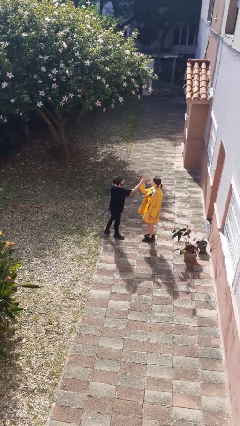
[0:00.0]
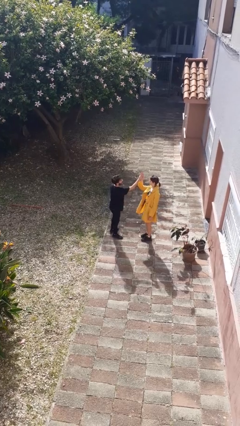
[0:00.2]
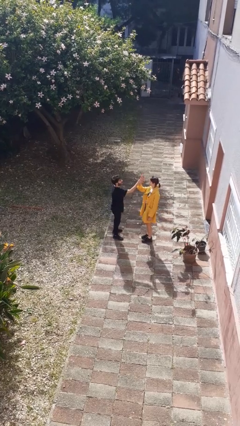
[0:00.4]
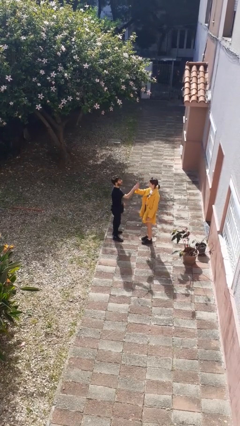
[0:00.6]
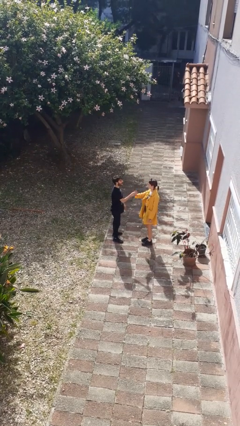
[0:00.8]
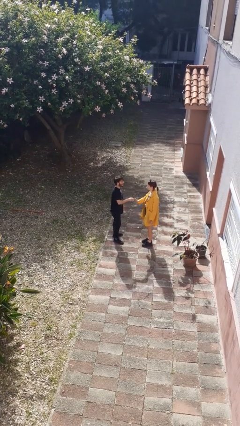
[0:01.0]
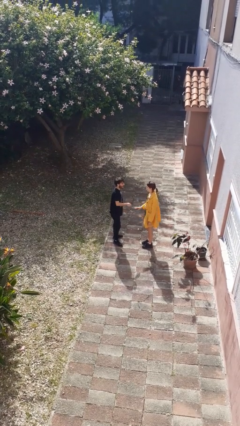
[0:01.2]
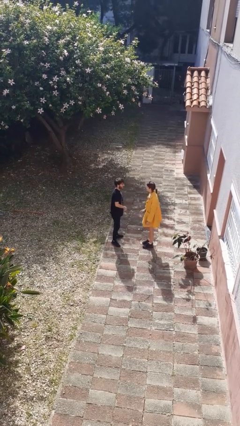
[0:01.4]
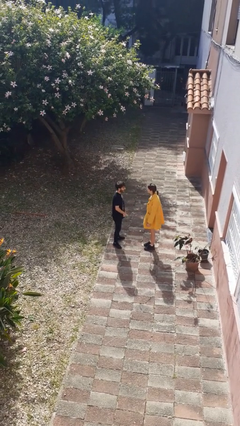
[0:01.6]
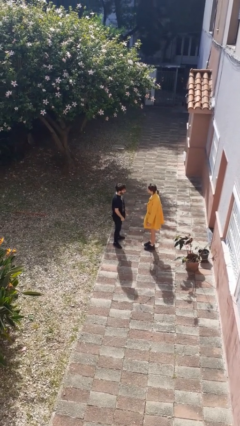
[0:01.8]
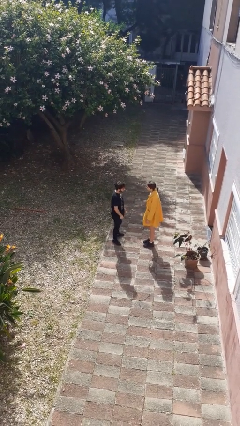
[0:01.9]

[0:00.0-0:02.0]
person highfives hand

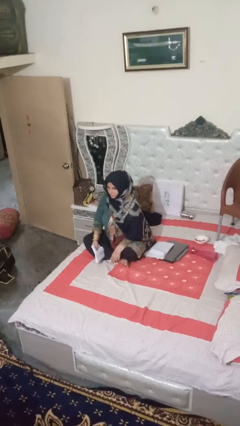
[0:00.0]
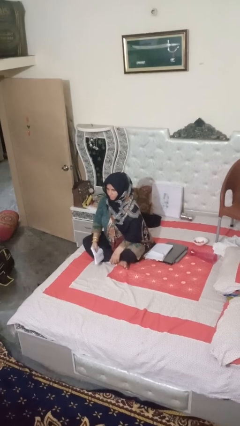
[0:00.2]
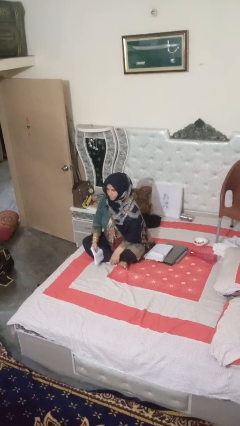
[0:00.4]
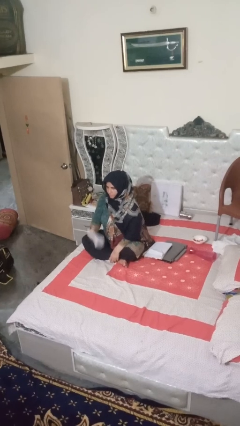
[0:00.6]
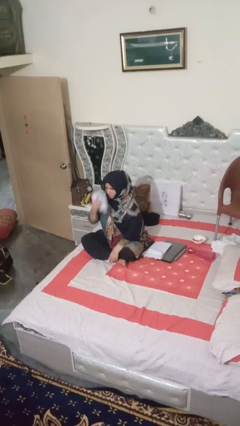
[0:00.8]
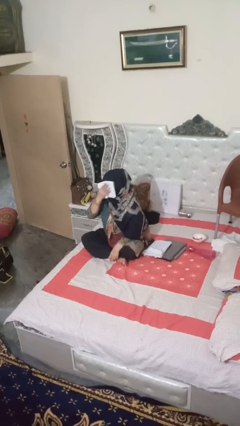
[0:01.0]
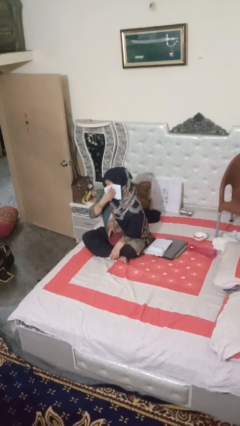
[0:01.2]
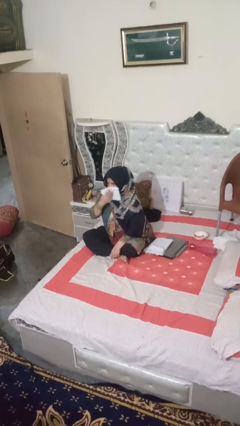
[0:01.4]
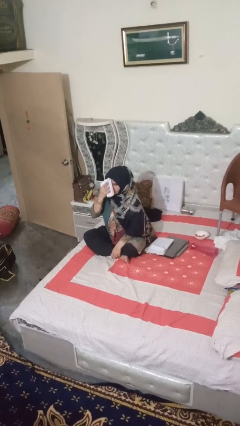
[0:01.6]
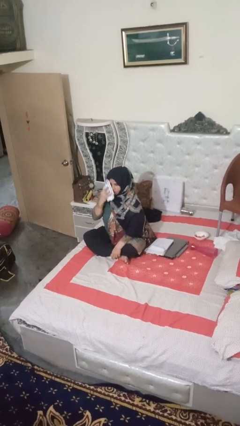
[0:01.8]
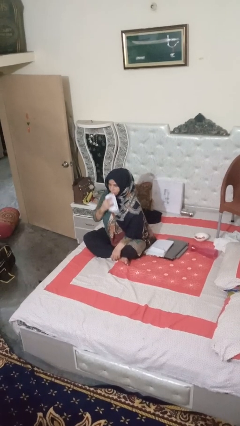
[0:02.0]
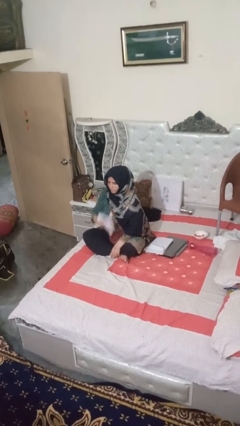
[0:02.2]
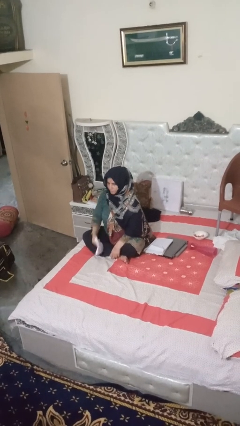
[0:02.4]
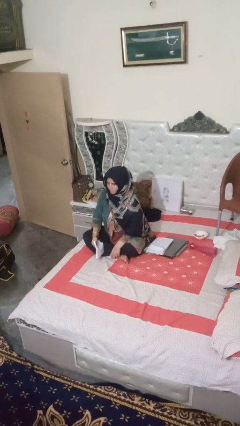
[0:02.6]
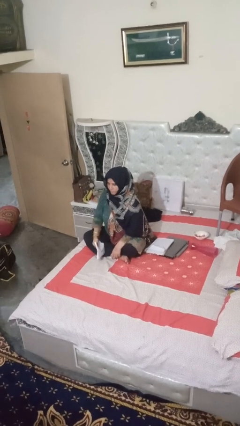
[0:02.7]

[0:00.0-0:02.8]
person wipes mouth with napkin

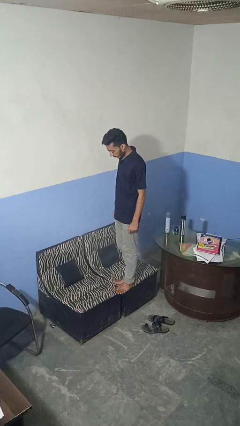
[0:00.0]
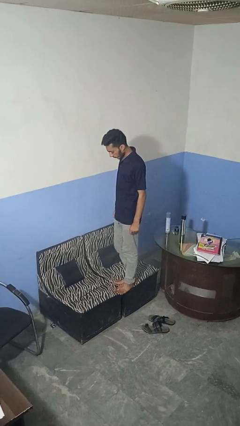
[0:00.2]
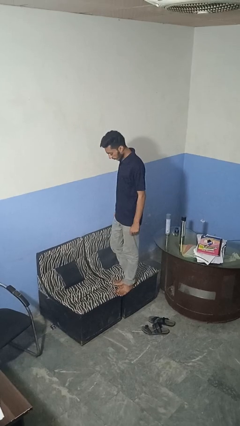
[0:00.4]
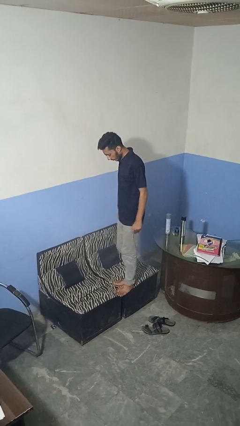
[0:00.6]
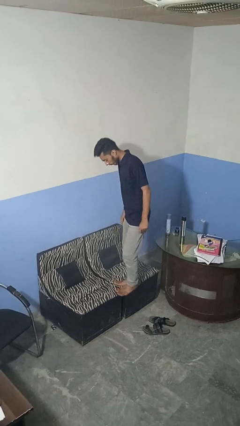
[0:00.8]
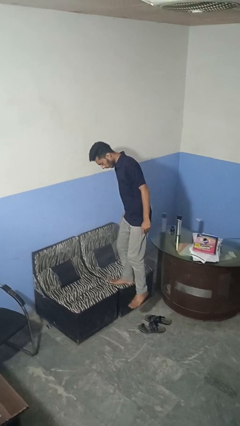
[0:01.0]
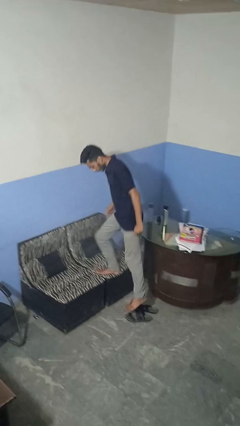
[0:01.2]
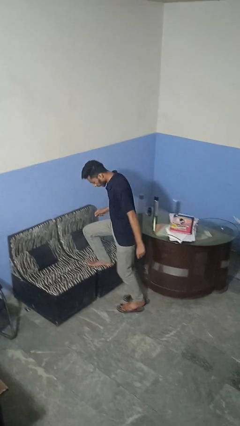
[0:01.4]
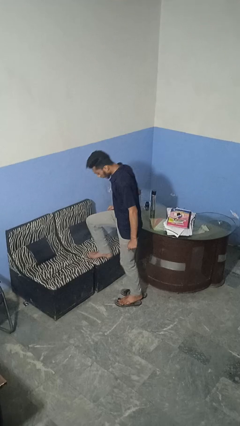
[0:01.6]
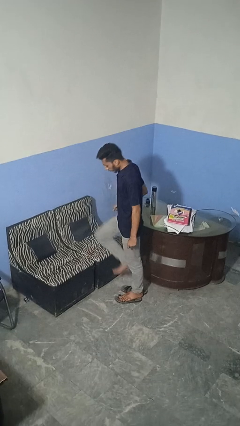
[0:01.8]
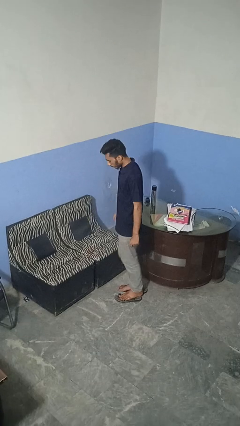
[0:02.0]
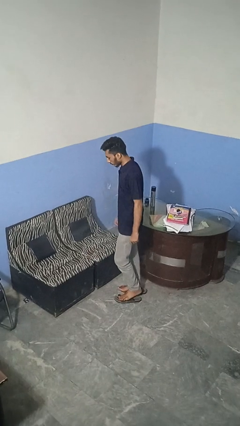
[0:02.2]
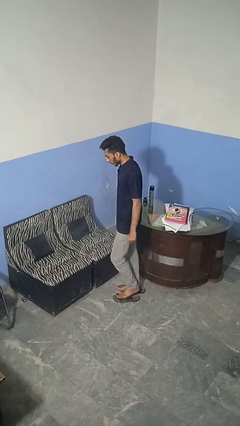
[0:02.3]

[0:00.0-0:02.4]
person climbs off couch

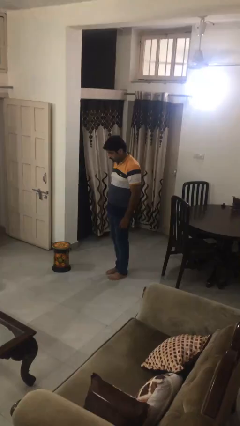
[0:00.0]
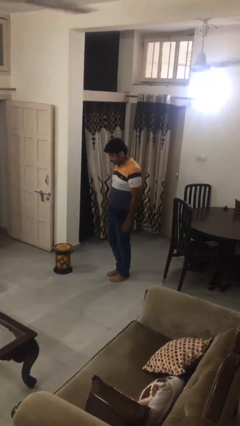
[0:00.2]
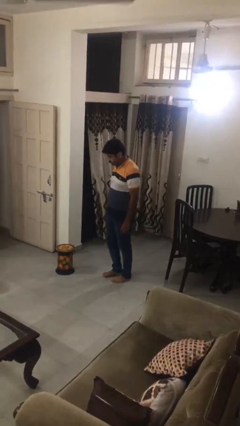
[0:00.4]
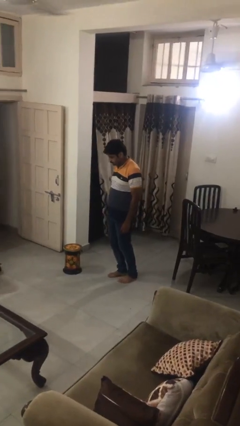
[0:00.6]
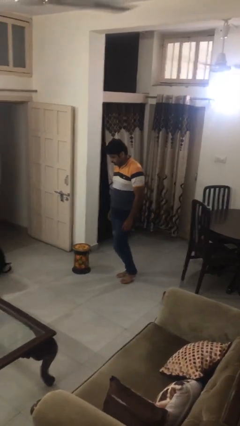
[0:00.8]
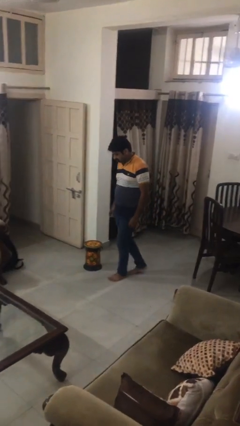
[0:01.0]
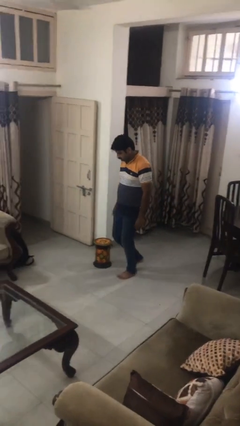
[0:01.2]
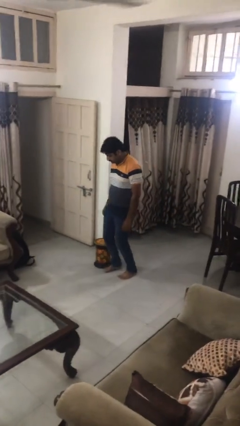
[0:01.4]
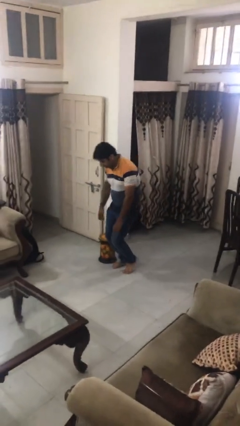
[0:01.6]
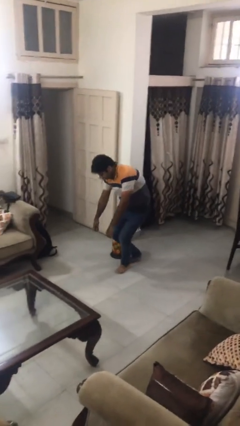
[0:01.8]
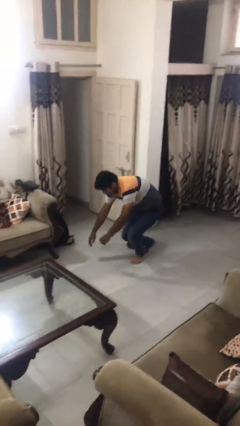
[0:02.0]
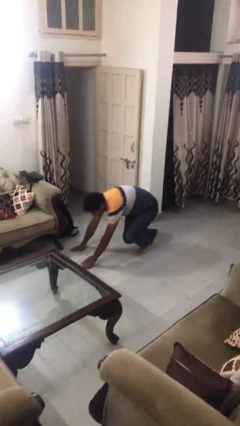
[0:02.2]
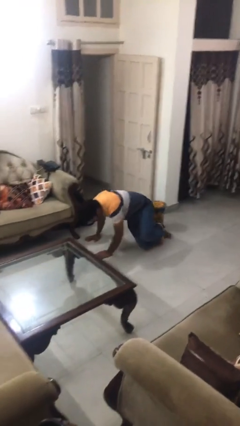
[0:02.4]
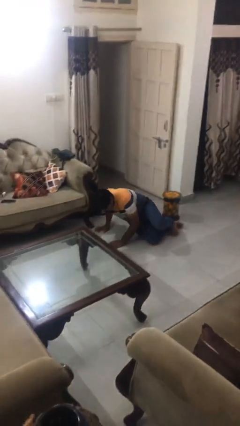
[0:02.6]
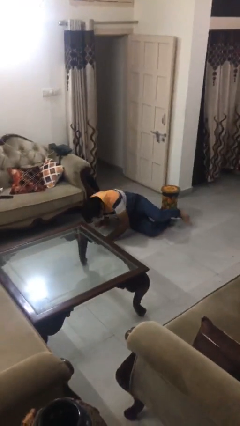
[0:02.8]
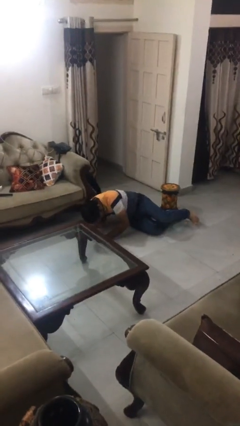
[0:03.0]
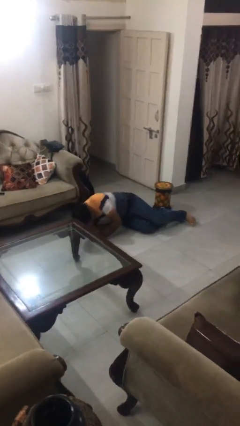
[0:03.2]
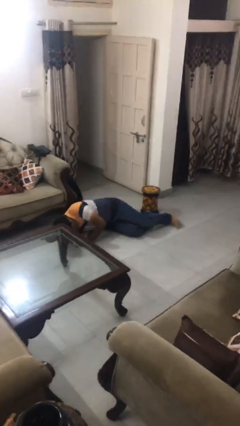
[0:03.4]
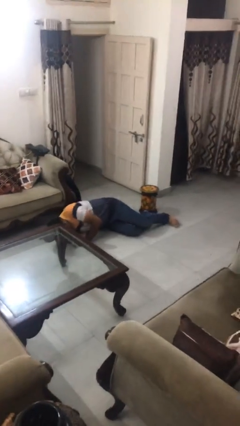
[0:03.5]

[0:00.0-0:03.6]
person trips on object on floor

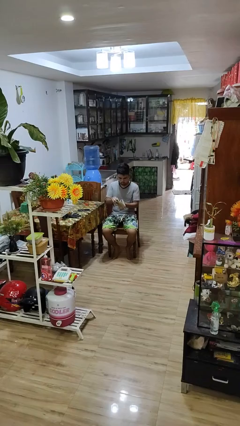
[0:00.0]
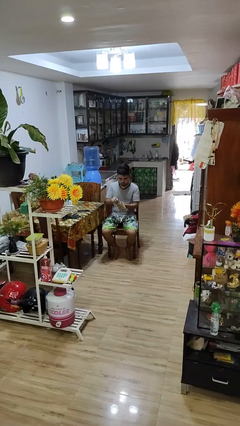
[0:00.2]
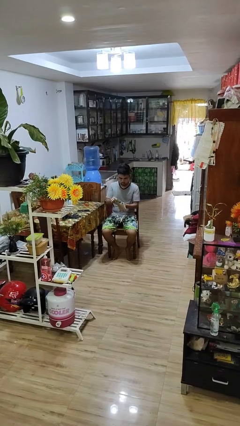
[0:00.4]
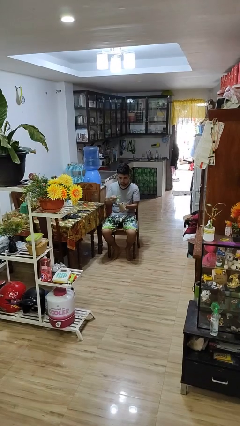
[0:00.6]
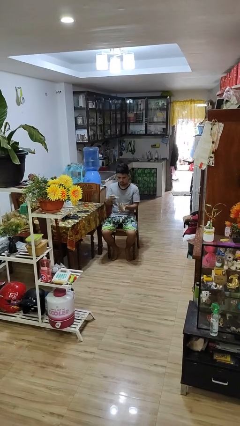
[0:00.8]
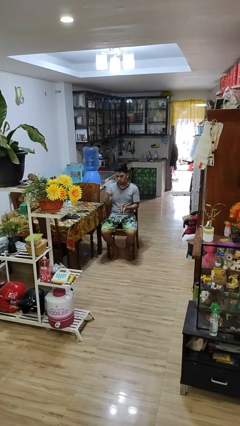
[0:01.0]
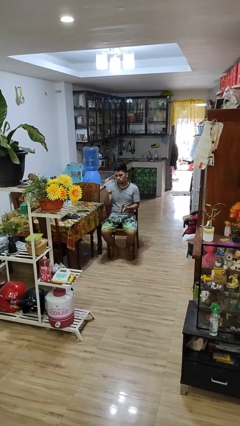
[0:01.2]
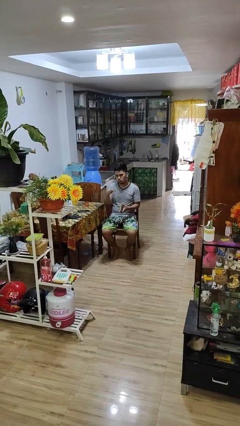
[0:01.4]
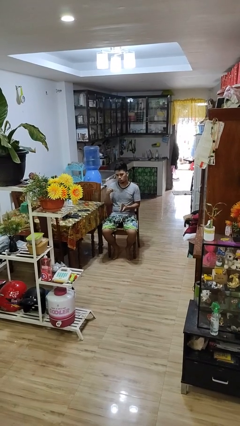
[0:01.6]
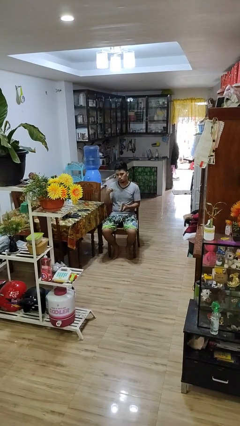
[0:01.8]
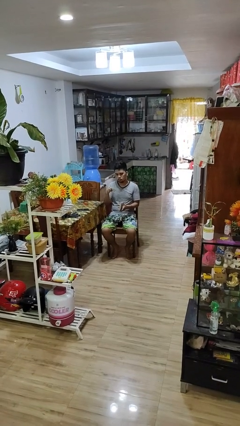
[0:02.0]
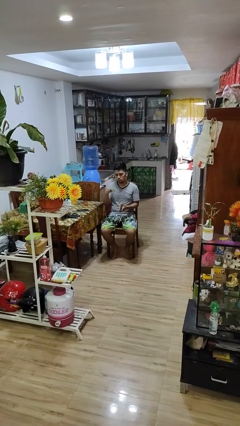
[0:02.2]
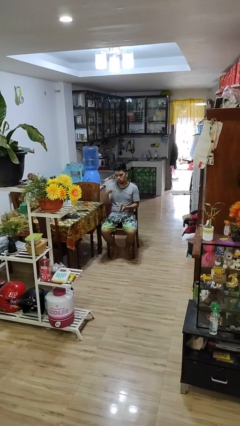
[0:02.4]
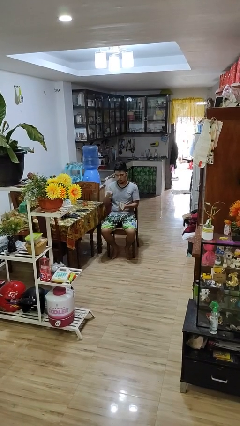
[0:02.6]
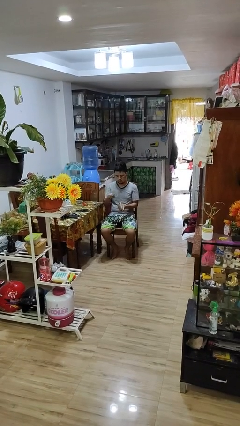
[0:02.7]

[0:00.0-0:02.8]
person takes object from purse

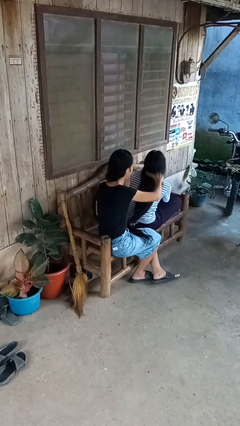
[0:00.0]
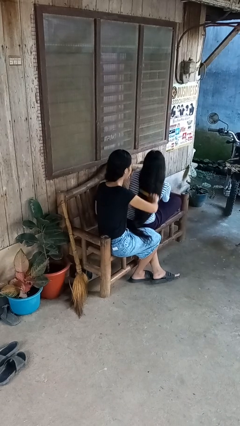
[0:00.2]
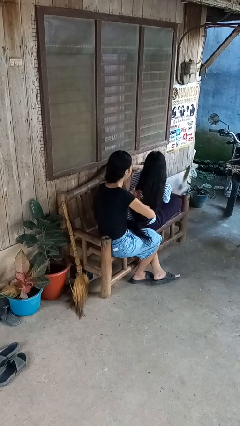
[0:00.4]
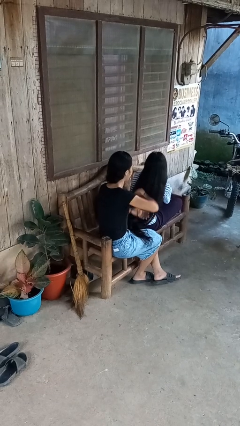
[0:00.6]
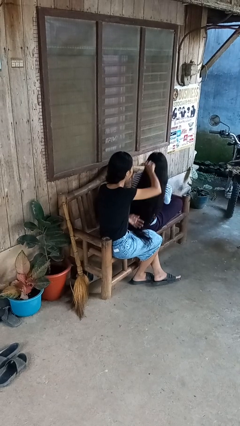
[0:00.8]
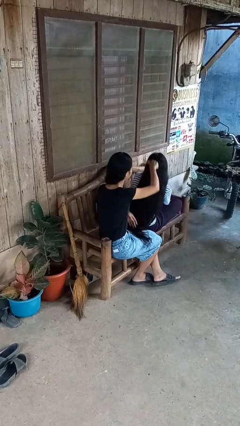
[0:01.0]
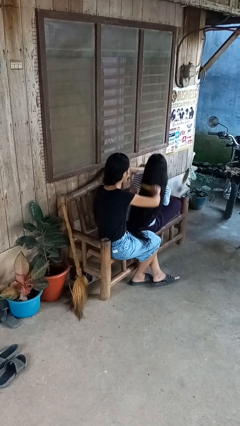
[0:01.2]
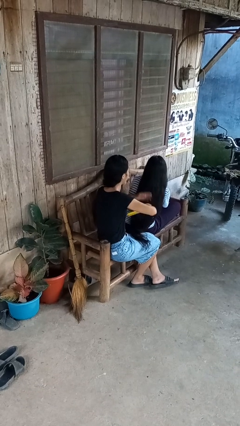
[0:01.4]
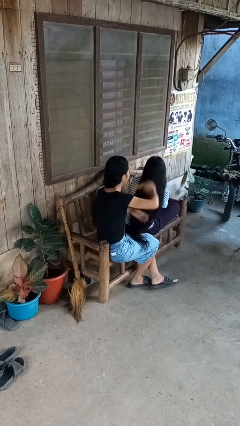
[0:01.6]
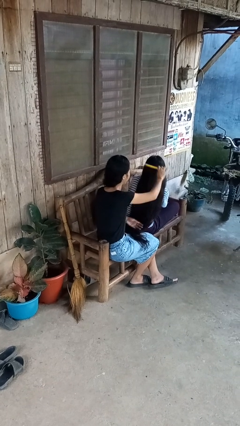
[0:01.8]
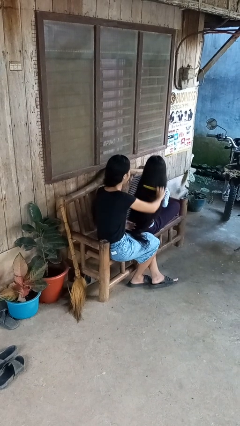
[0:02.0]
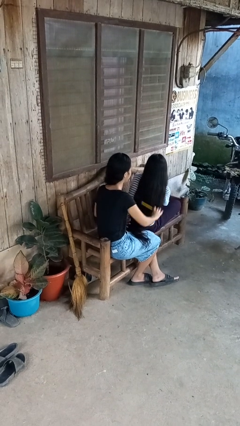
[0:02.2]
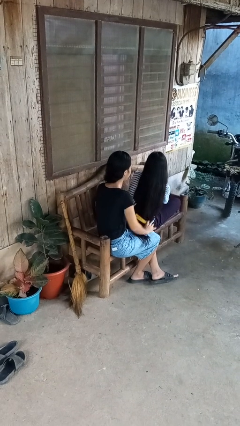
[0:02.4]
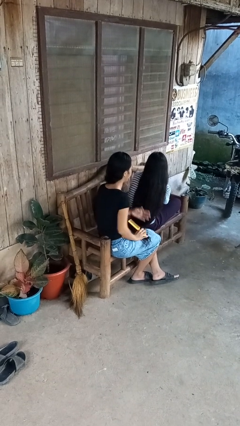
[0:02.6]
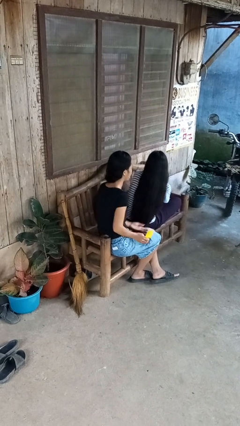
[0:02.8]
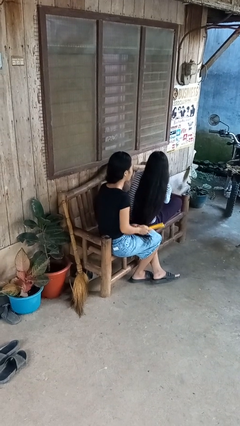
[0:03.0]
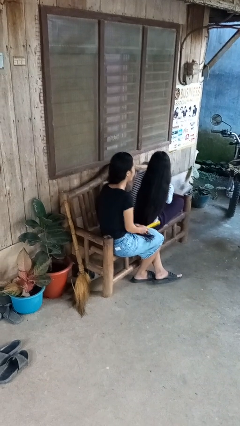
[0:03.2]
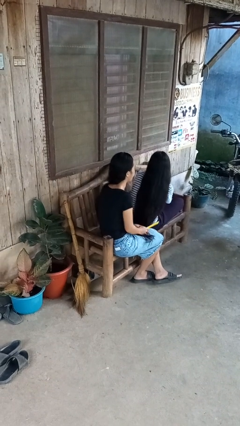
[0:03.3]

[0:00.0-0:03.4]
person brushes hair of person

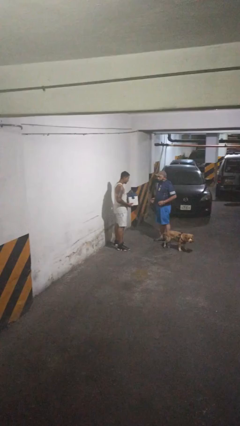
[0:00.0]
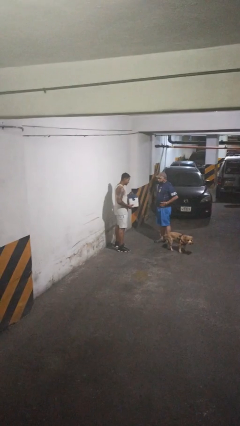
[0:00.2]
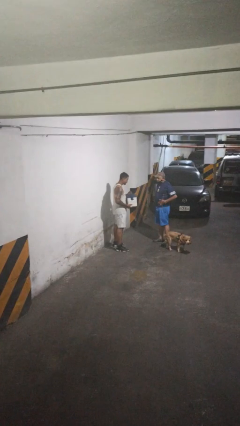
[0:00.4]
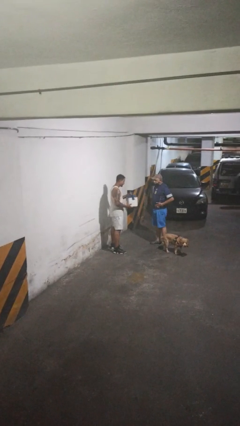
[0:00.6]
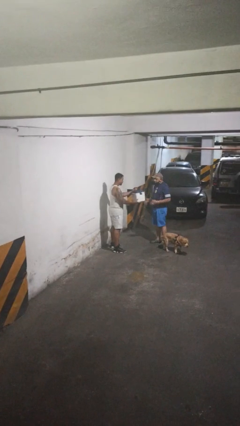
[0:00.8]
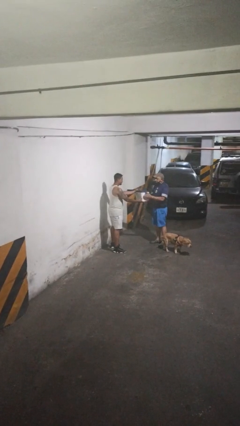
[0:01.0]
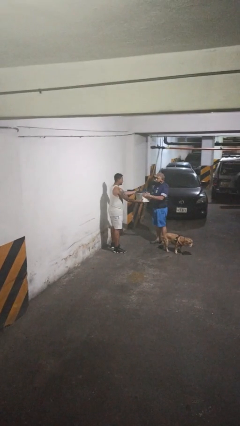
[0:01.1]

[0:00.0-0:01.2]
person transfers object to person
